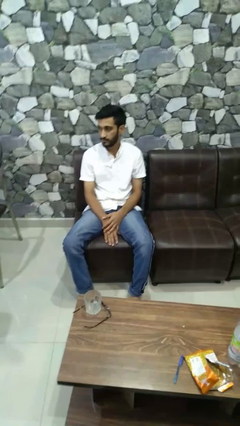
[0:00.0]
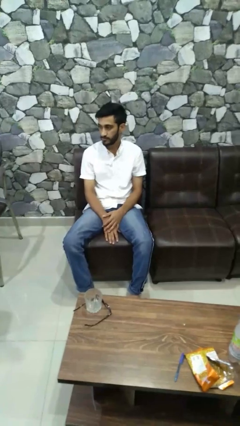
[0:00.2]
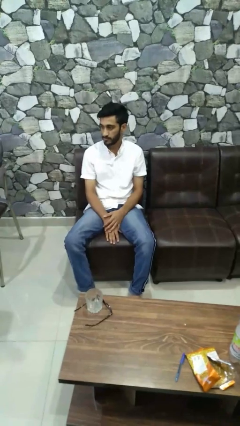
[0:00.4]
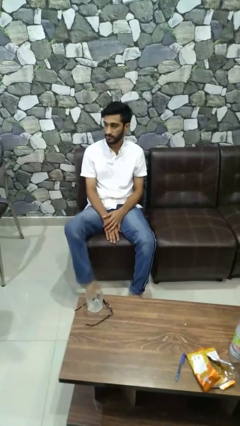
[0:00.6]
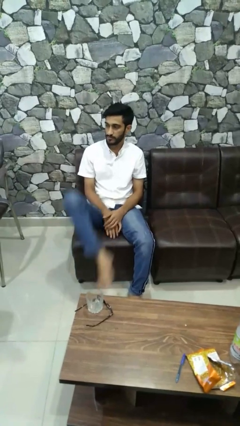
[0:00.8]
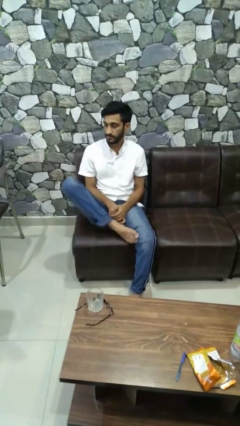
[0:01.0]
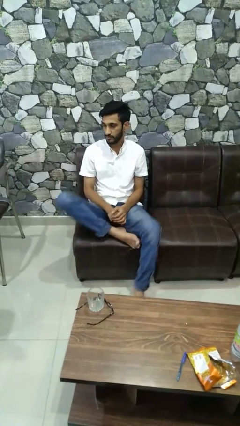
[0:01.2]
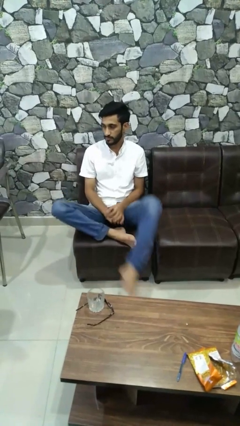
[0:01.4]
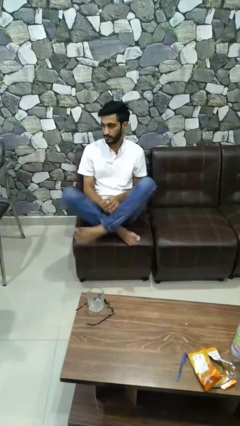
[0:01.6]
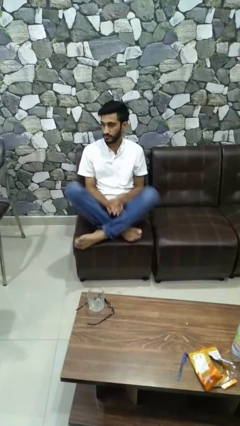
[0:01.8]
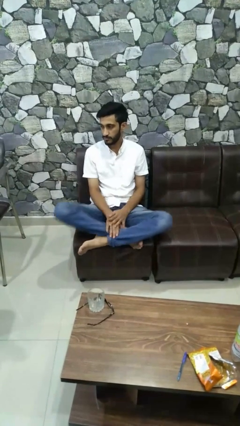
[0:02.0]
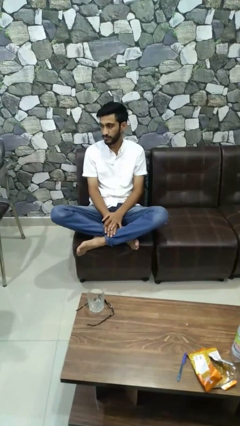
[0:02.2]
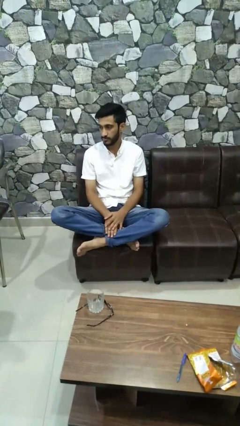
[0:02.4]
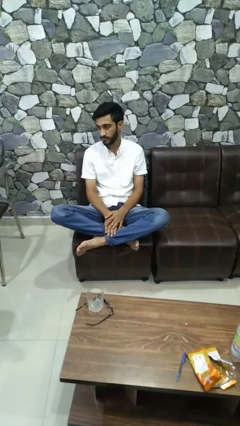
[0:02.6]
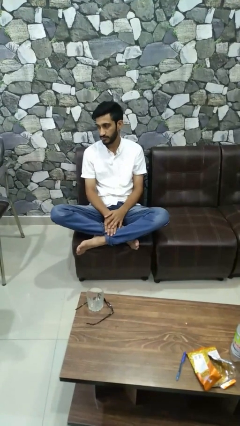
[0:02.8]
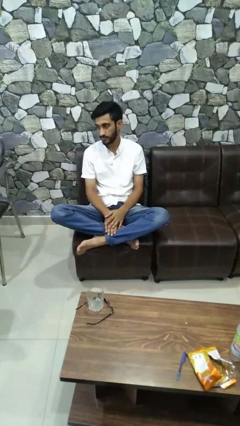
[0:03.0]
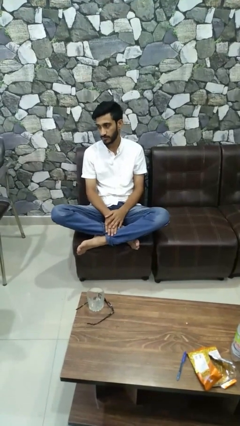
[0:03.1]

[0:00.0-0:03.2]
person crosses legs

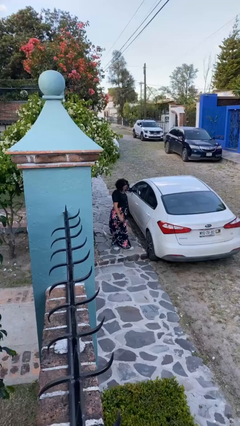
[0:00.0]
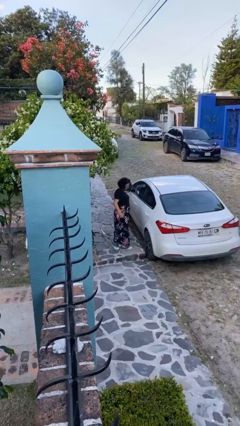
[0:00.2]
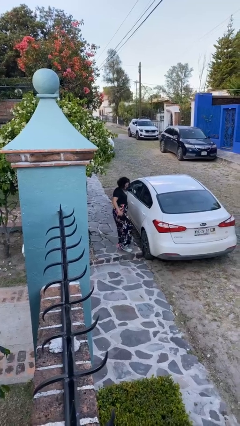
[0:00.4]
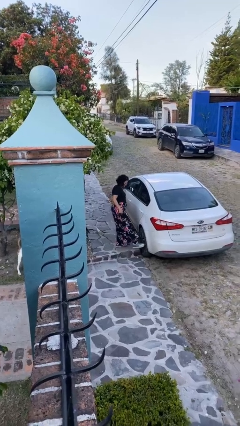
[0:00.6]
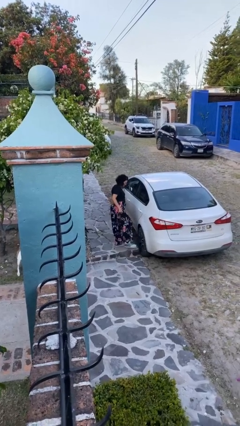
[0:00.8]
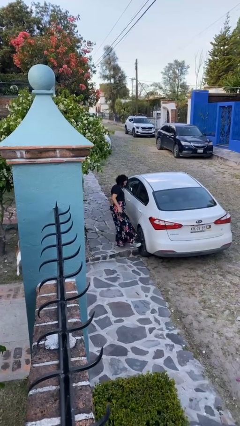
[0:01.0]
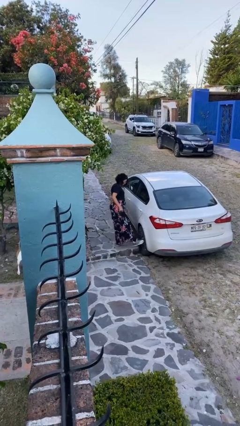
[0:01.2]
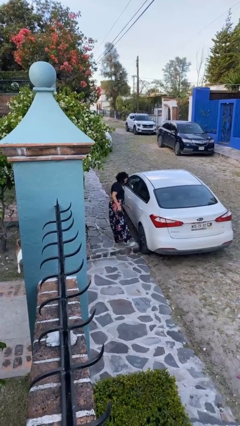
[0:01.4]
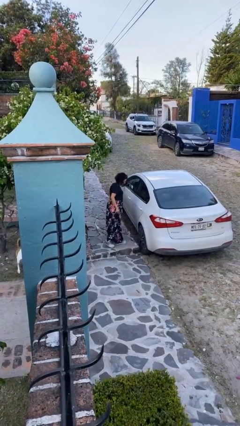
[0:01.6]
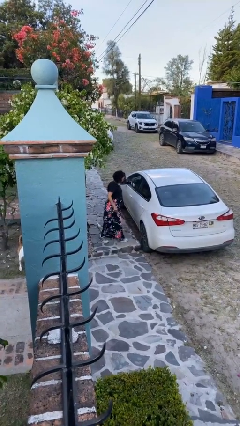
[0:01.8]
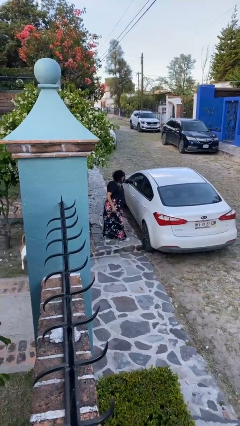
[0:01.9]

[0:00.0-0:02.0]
person kicks car tires

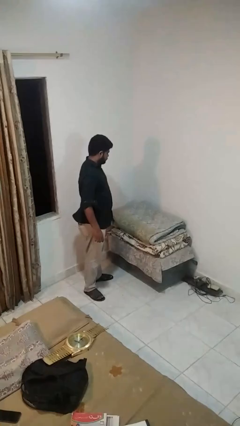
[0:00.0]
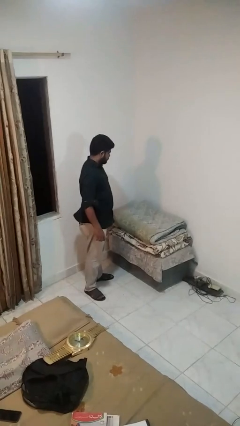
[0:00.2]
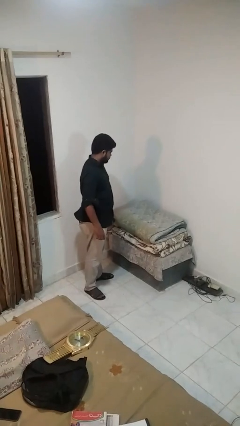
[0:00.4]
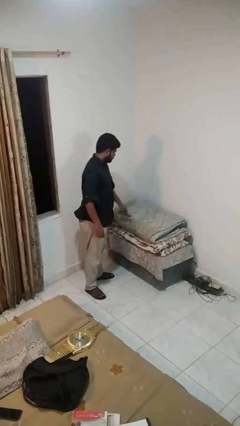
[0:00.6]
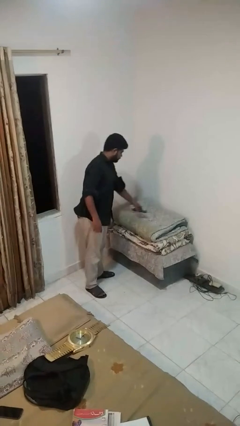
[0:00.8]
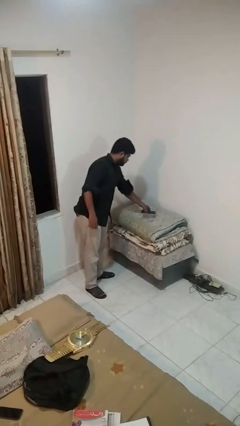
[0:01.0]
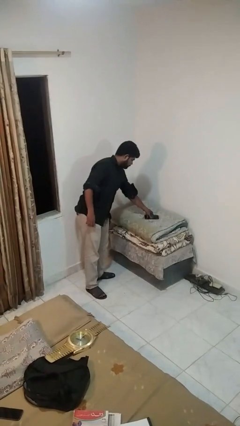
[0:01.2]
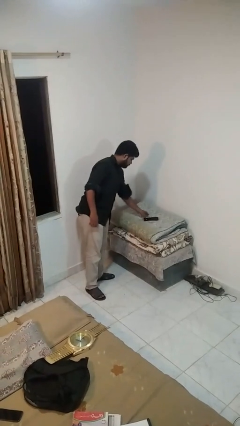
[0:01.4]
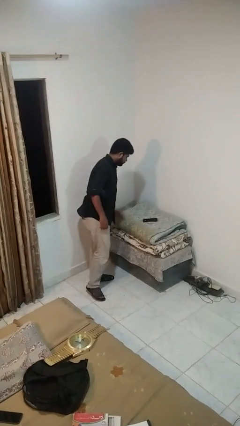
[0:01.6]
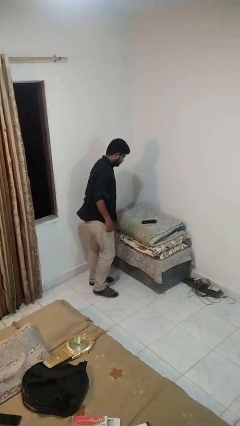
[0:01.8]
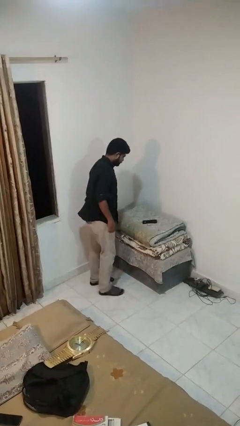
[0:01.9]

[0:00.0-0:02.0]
person puts down object on couch

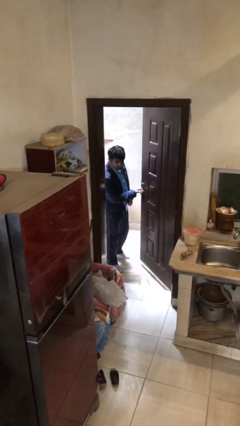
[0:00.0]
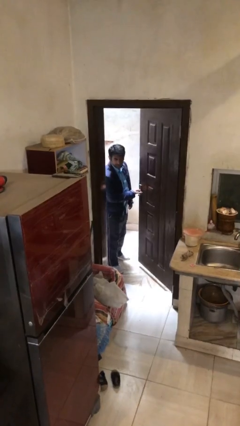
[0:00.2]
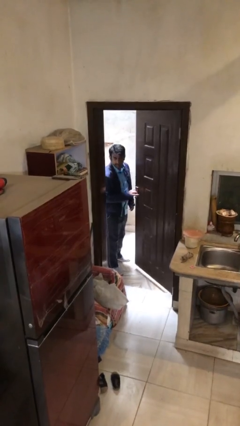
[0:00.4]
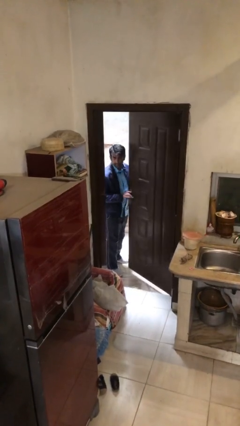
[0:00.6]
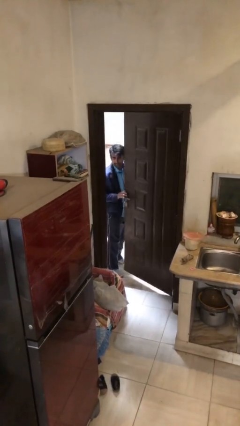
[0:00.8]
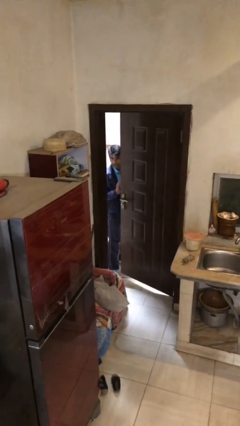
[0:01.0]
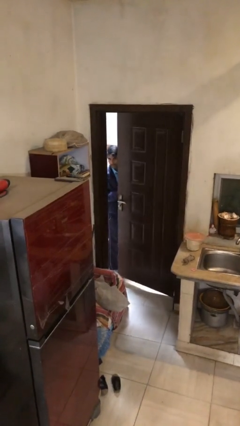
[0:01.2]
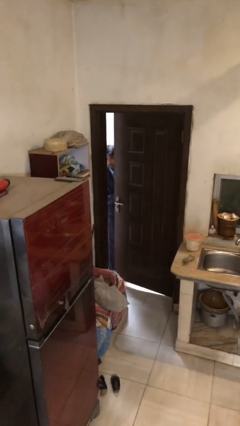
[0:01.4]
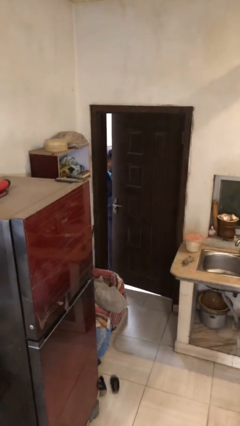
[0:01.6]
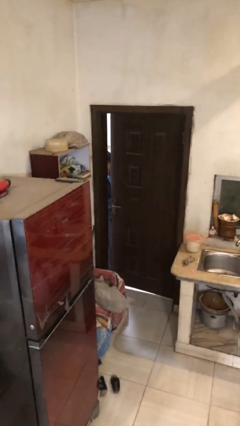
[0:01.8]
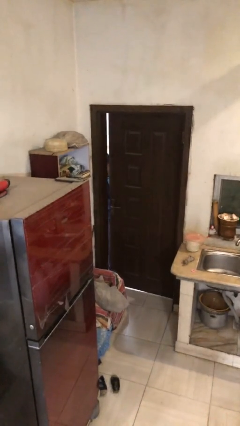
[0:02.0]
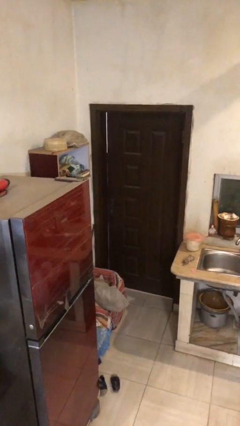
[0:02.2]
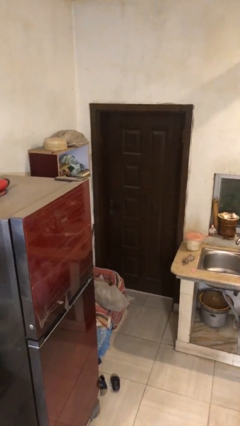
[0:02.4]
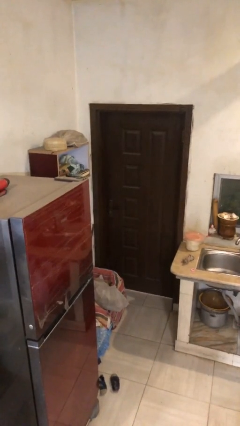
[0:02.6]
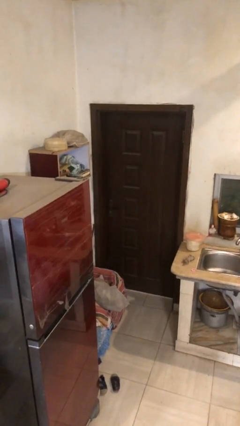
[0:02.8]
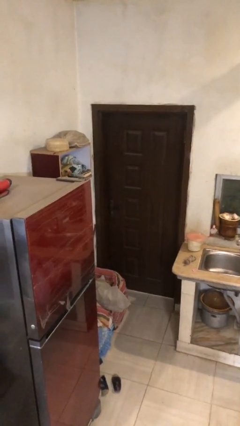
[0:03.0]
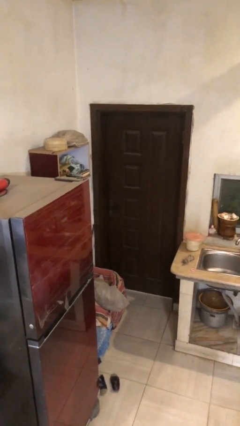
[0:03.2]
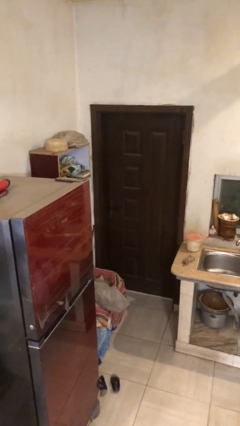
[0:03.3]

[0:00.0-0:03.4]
person closes facility door

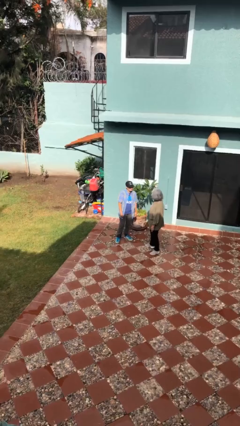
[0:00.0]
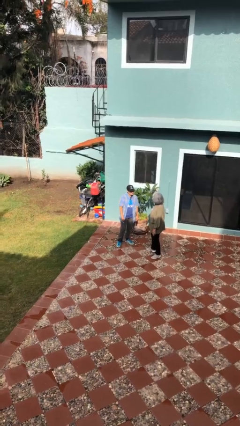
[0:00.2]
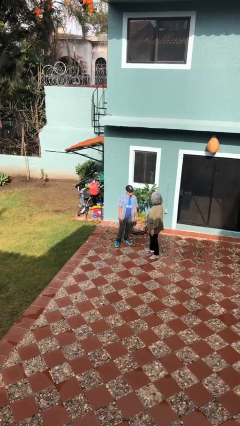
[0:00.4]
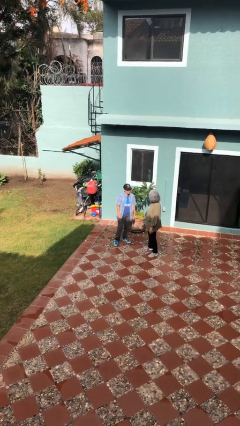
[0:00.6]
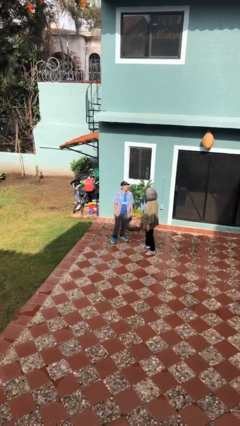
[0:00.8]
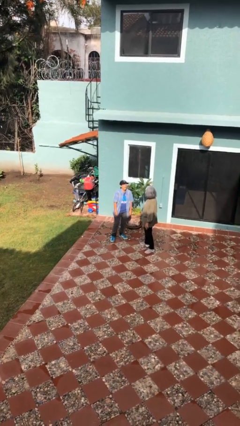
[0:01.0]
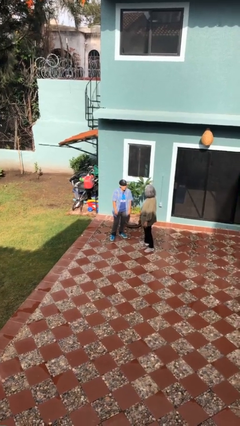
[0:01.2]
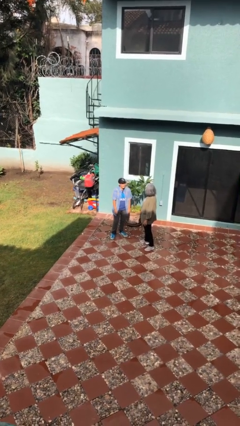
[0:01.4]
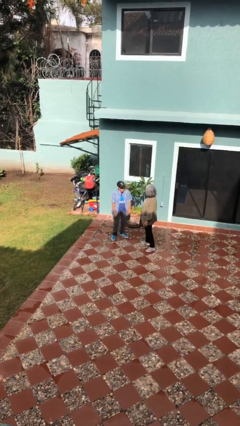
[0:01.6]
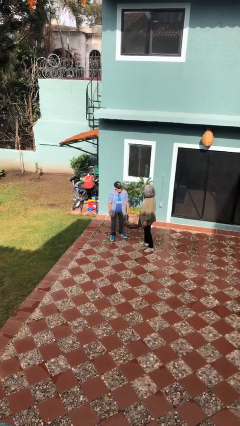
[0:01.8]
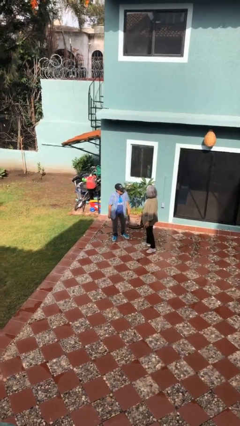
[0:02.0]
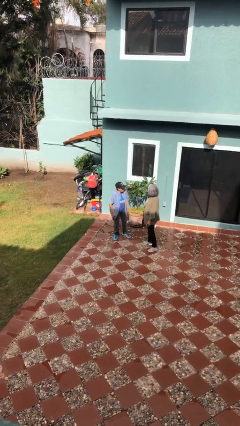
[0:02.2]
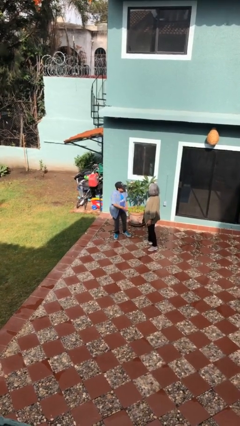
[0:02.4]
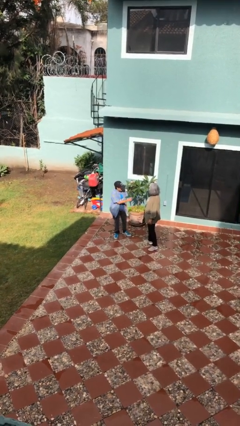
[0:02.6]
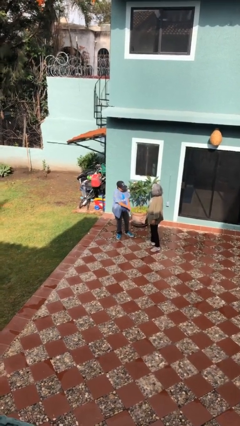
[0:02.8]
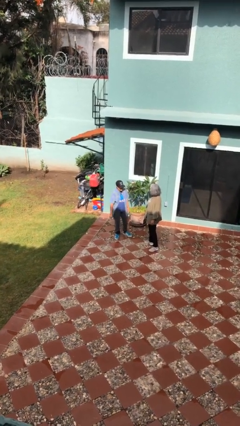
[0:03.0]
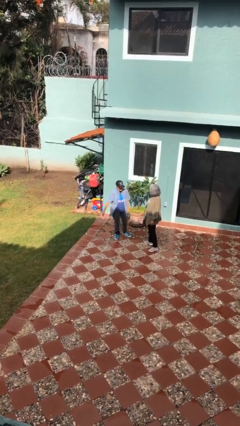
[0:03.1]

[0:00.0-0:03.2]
person laughs with person

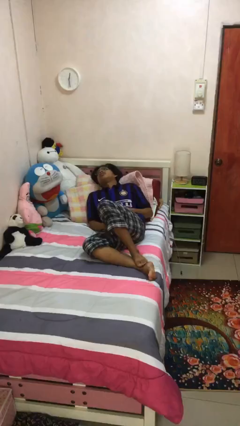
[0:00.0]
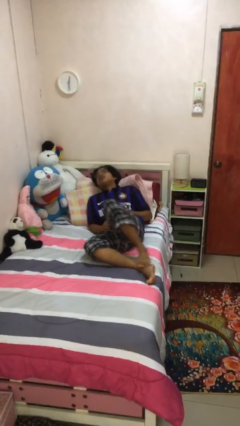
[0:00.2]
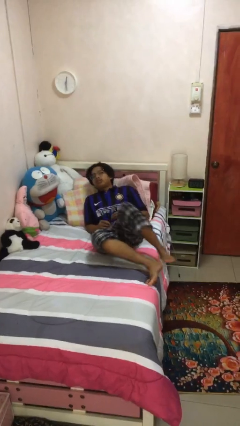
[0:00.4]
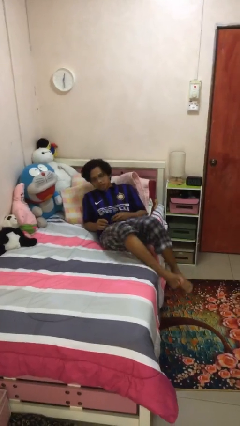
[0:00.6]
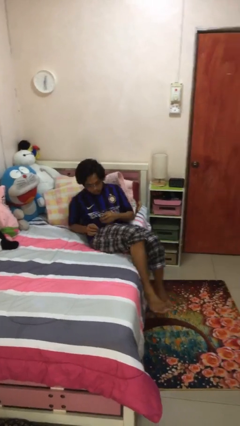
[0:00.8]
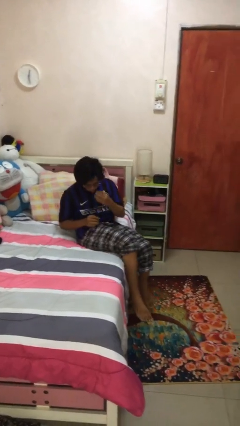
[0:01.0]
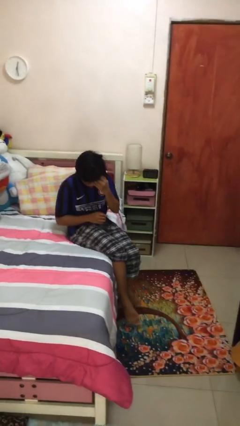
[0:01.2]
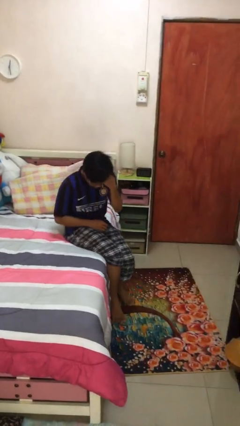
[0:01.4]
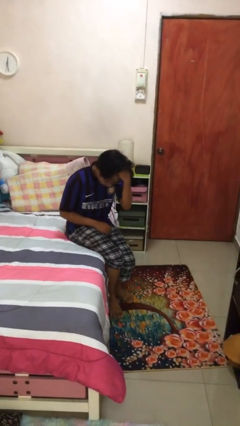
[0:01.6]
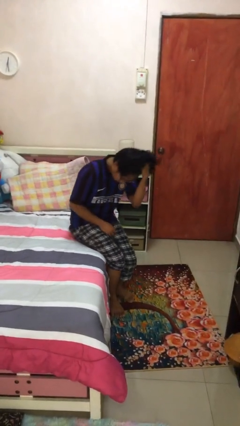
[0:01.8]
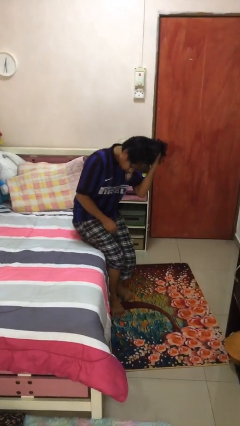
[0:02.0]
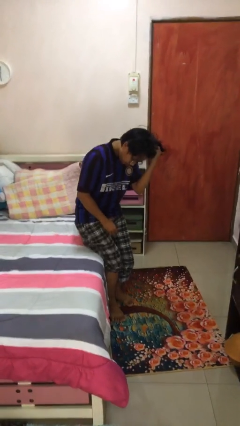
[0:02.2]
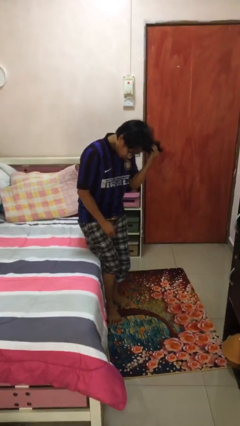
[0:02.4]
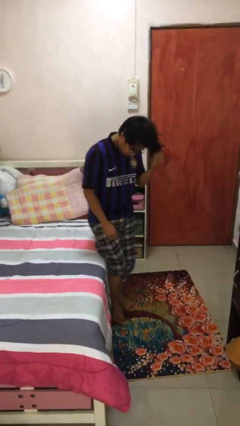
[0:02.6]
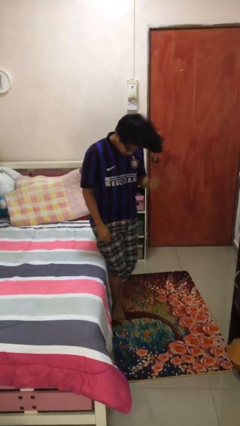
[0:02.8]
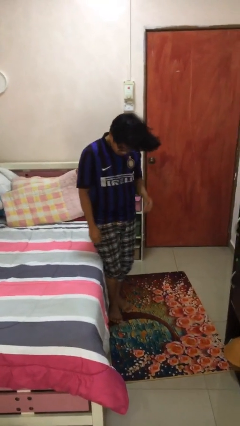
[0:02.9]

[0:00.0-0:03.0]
person stands up

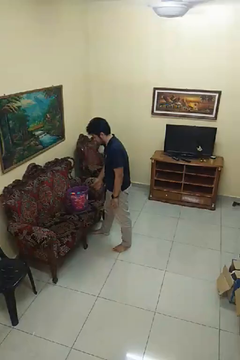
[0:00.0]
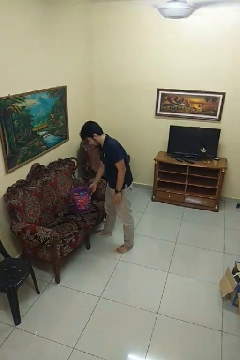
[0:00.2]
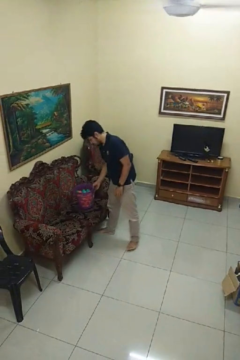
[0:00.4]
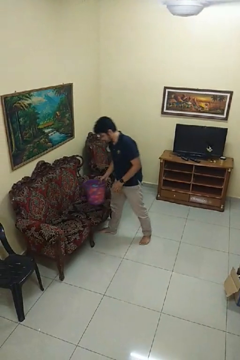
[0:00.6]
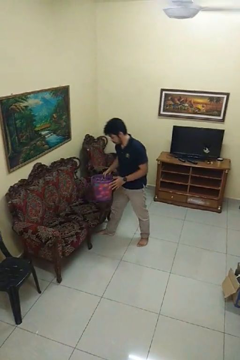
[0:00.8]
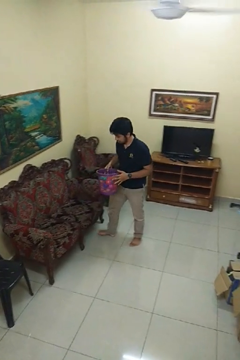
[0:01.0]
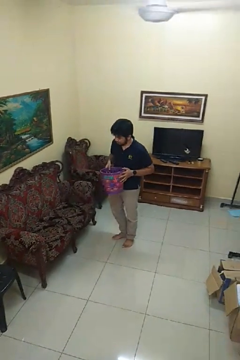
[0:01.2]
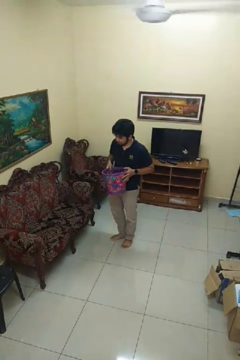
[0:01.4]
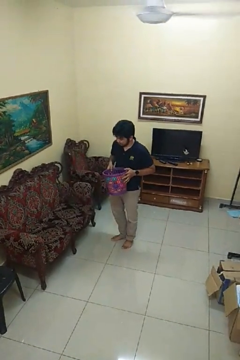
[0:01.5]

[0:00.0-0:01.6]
person picks up object from couch
